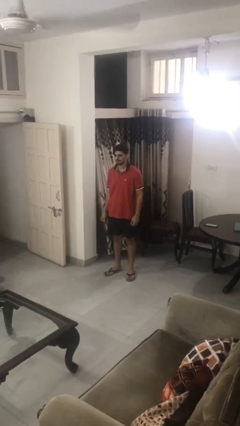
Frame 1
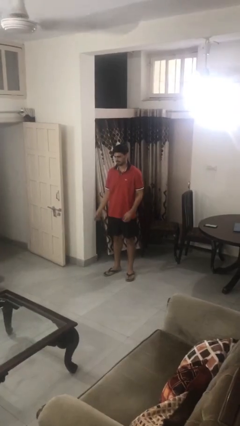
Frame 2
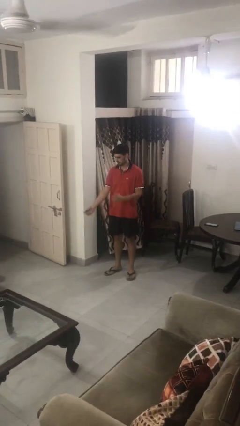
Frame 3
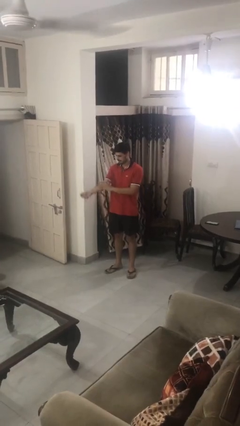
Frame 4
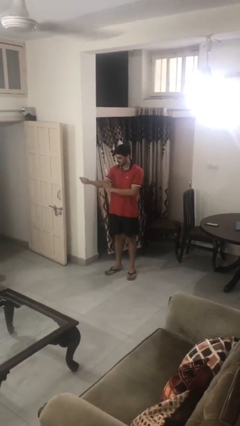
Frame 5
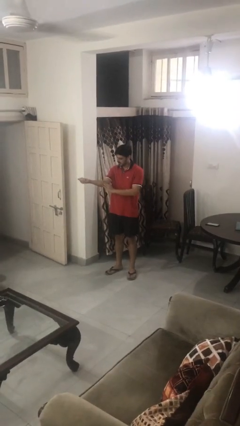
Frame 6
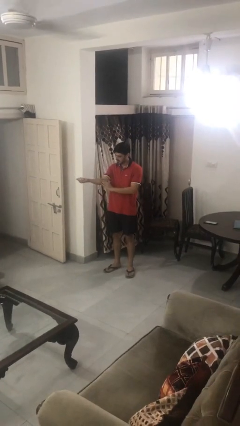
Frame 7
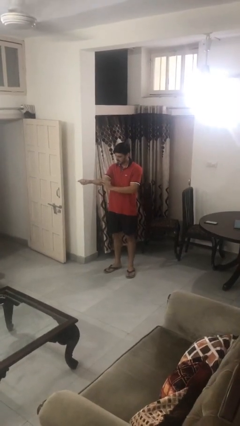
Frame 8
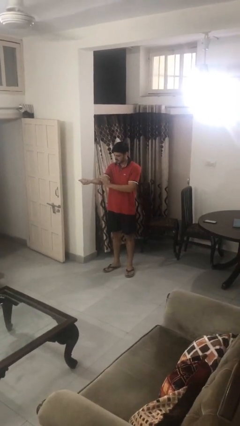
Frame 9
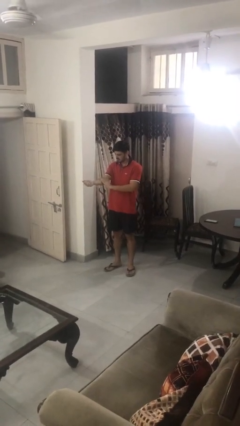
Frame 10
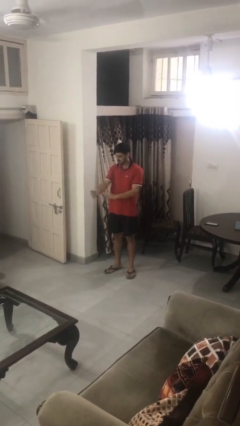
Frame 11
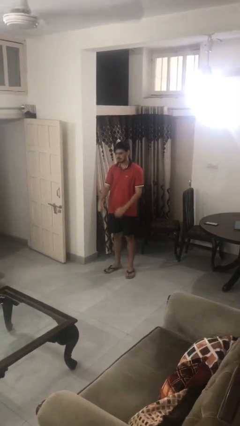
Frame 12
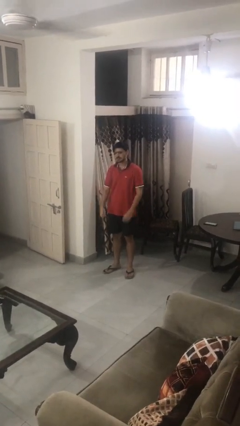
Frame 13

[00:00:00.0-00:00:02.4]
person swats bug

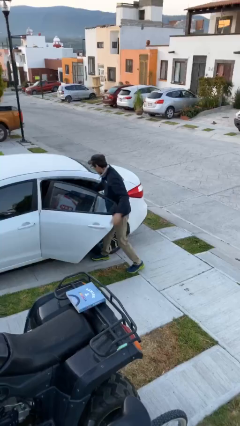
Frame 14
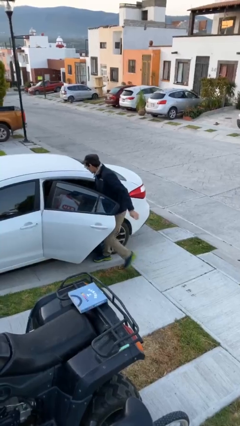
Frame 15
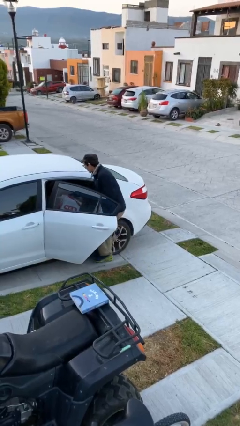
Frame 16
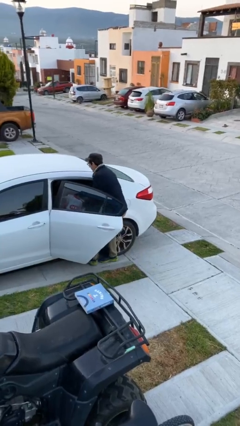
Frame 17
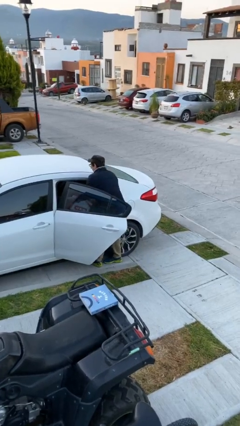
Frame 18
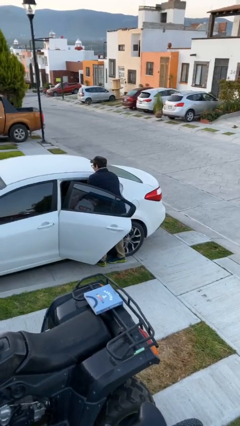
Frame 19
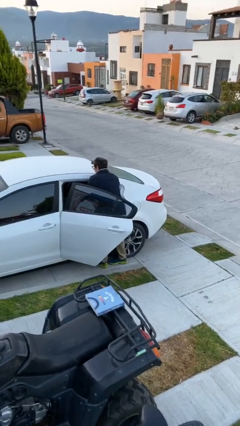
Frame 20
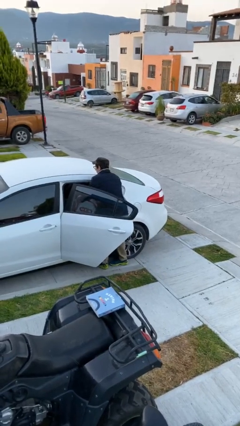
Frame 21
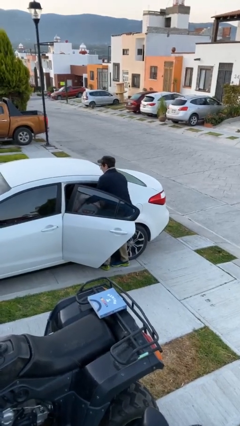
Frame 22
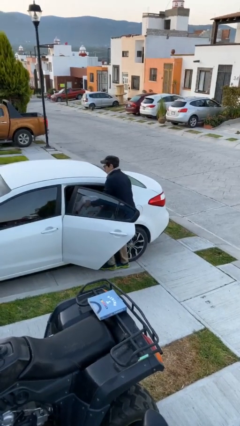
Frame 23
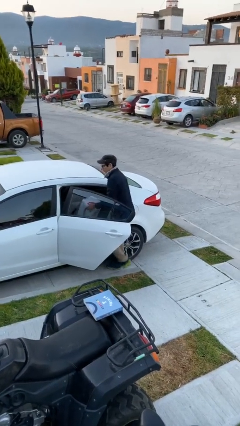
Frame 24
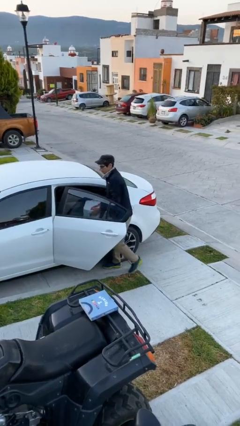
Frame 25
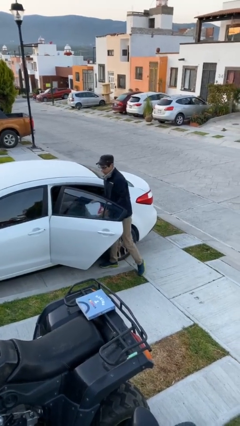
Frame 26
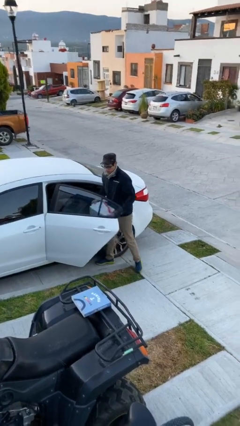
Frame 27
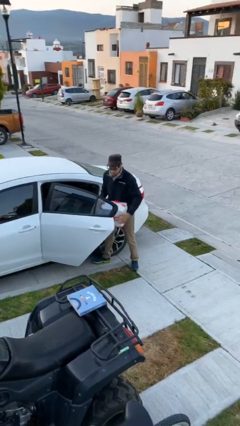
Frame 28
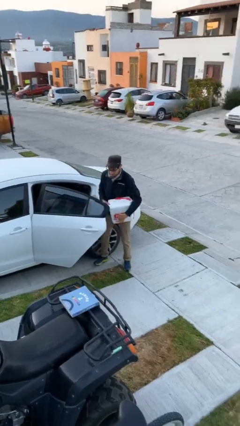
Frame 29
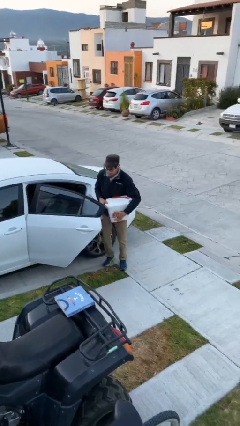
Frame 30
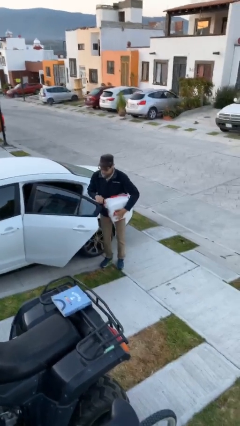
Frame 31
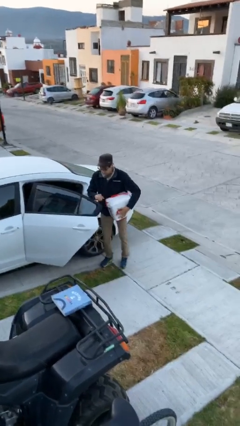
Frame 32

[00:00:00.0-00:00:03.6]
person unloads car

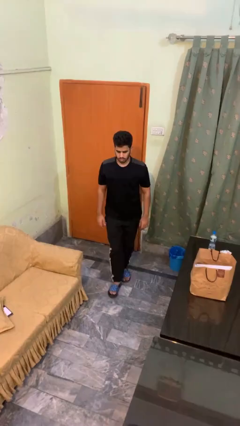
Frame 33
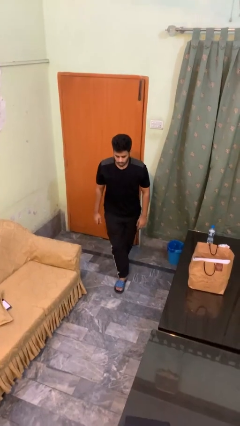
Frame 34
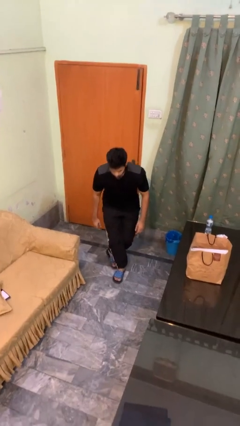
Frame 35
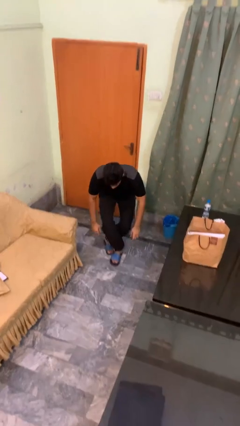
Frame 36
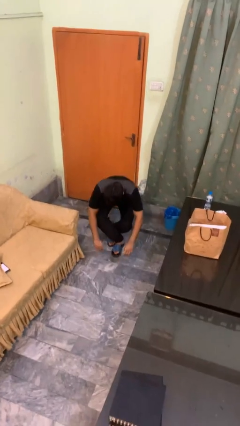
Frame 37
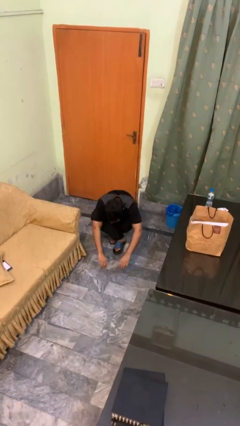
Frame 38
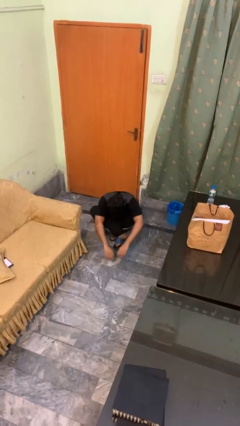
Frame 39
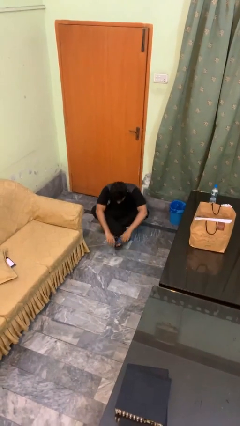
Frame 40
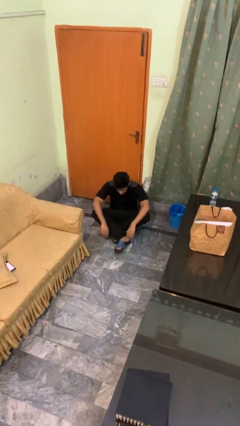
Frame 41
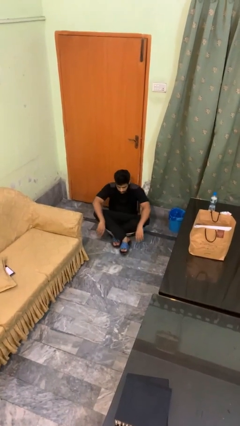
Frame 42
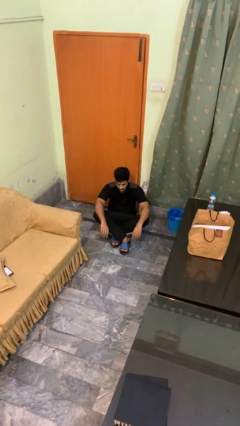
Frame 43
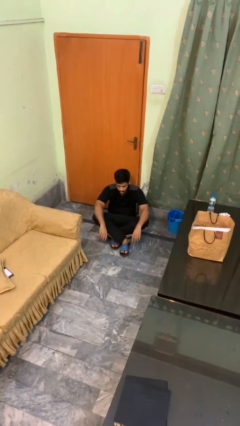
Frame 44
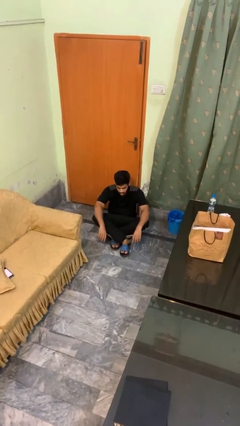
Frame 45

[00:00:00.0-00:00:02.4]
person sits crisscross

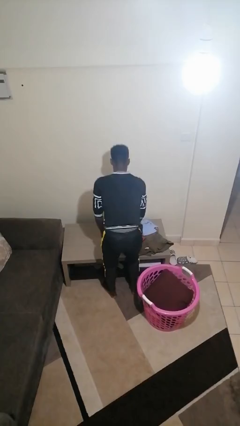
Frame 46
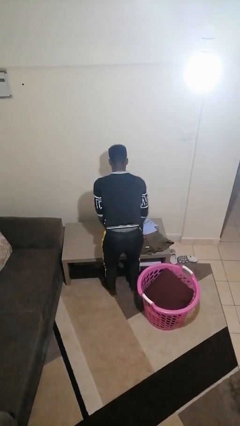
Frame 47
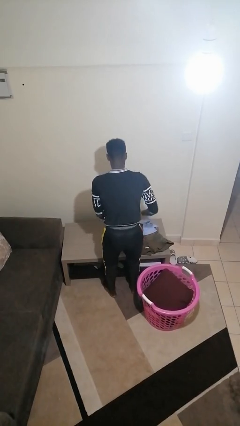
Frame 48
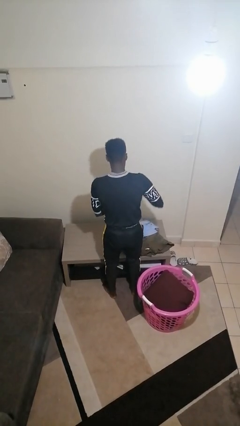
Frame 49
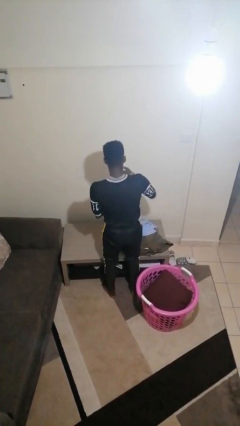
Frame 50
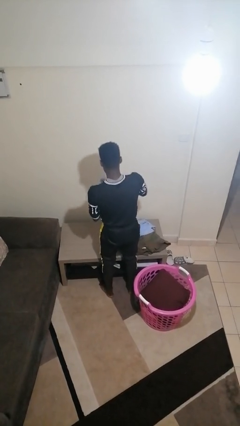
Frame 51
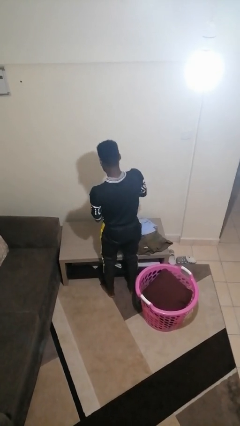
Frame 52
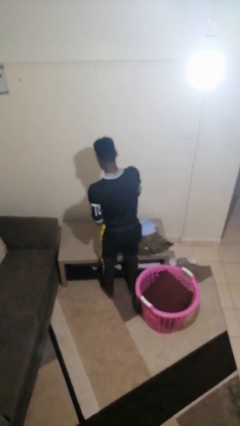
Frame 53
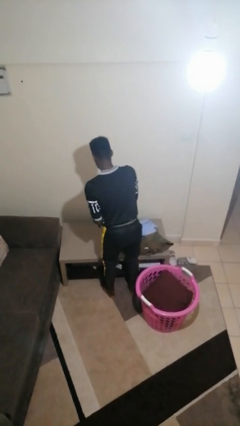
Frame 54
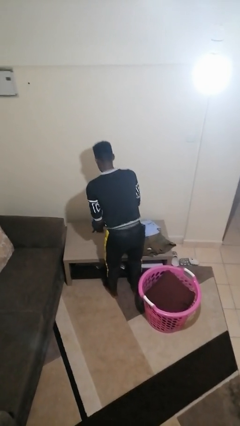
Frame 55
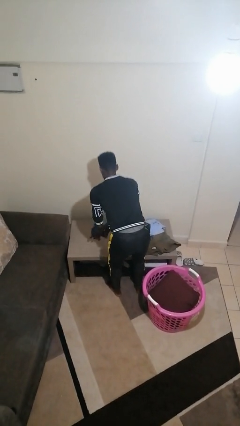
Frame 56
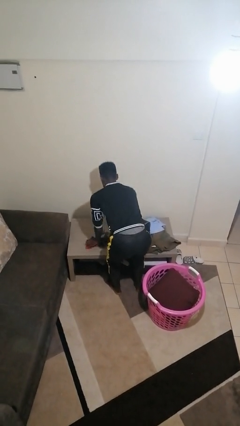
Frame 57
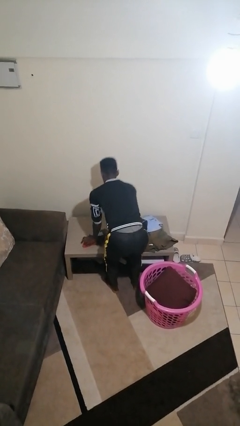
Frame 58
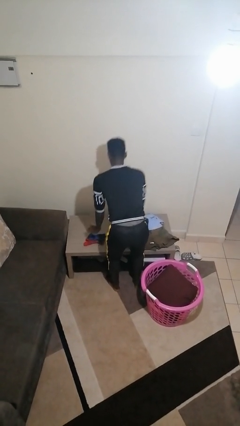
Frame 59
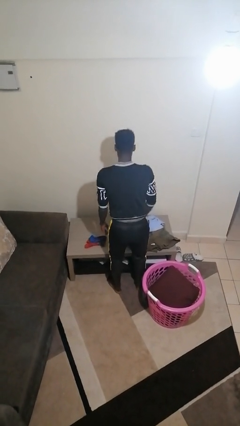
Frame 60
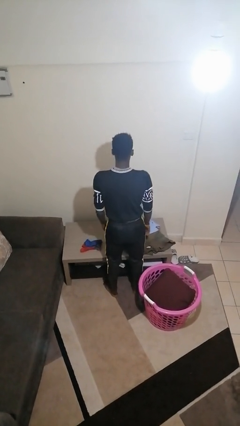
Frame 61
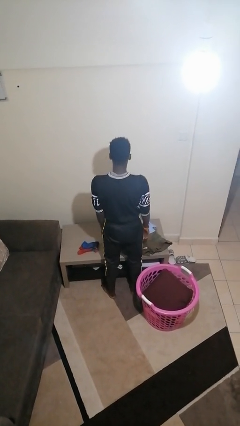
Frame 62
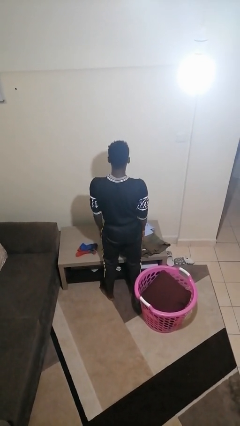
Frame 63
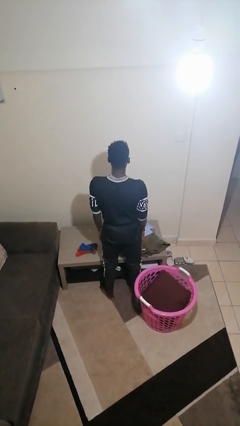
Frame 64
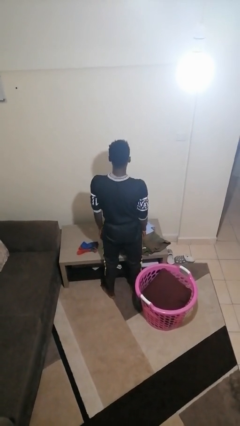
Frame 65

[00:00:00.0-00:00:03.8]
person folds socks

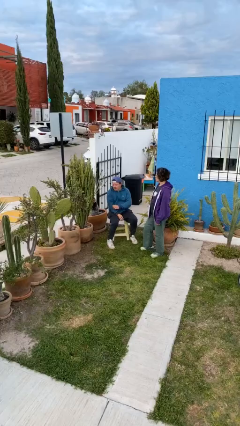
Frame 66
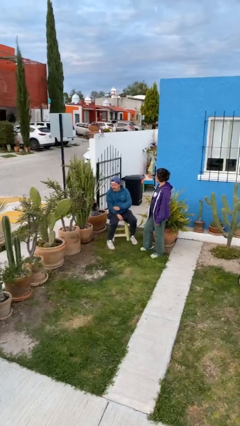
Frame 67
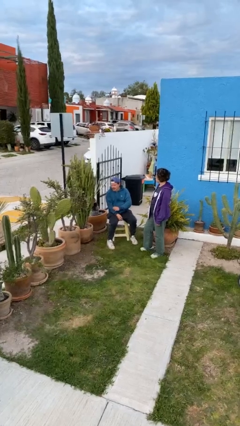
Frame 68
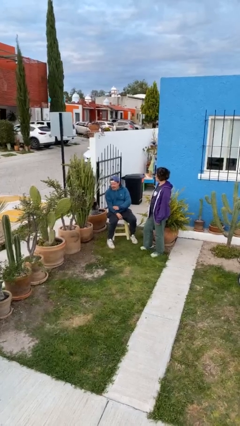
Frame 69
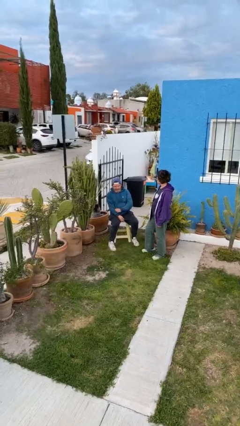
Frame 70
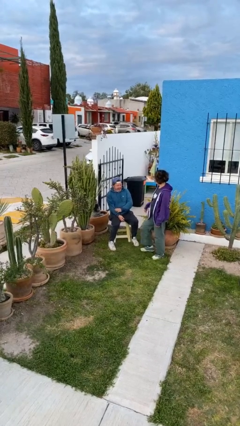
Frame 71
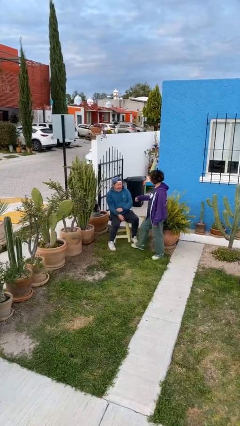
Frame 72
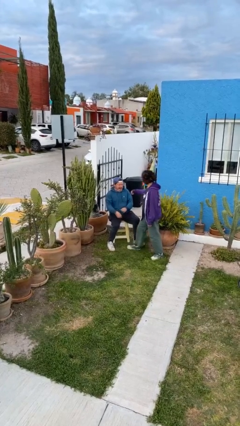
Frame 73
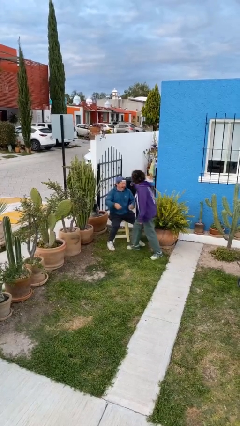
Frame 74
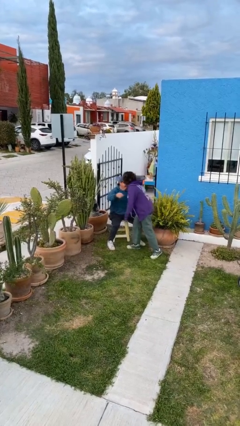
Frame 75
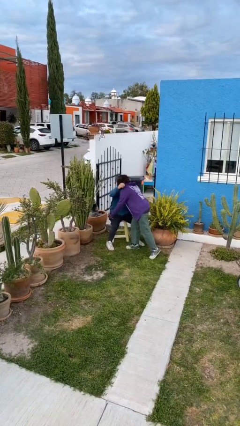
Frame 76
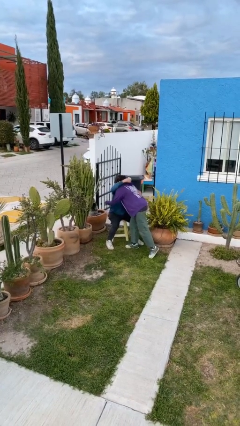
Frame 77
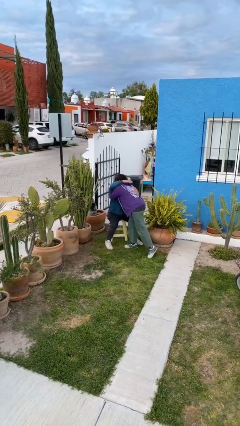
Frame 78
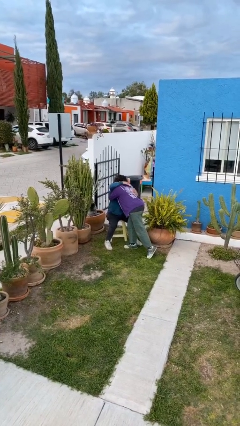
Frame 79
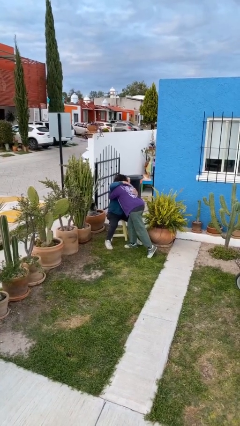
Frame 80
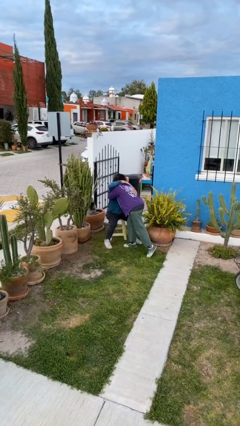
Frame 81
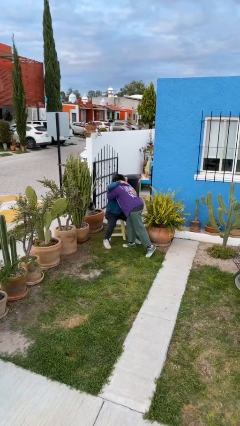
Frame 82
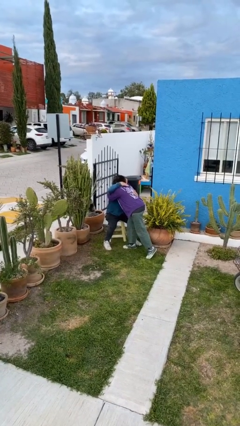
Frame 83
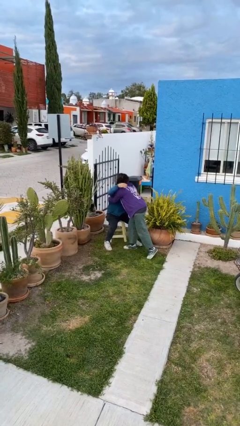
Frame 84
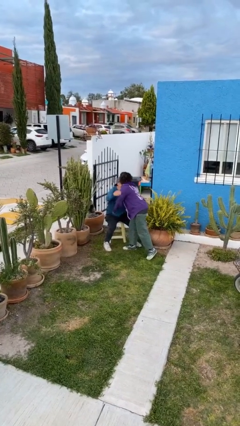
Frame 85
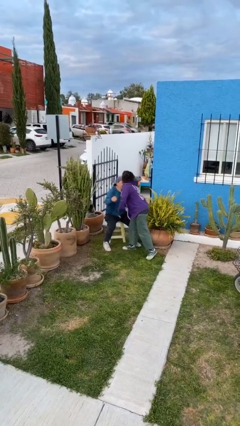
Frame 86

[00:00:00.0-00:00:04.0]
person embraces person

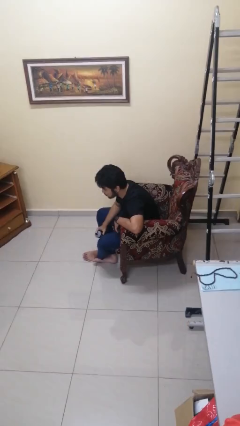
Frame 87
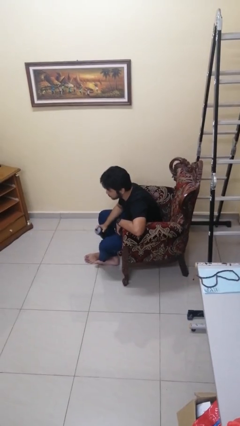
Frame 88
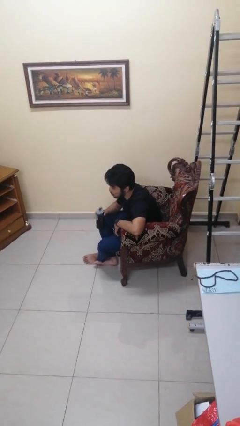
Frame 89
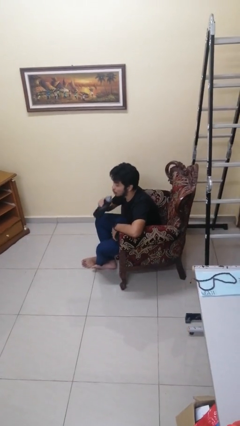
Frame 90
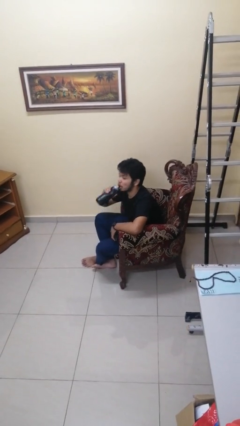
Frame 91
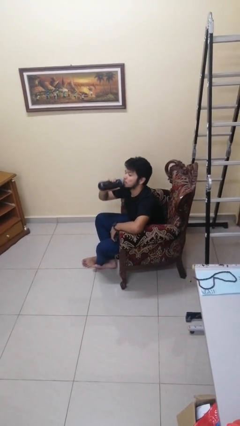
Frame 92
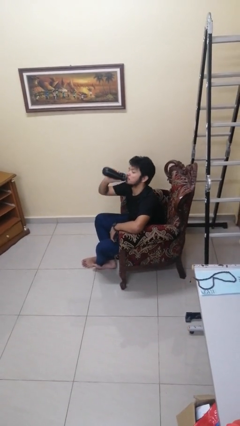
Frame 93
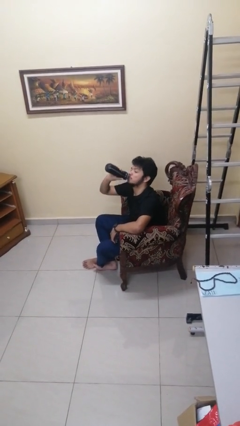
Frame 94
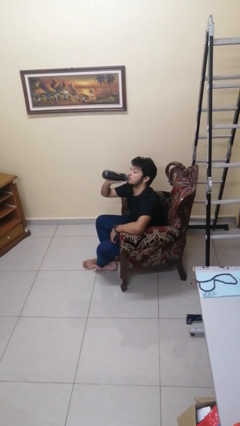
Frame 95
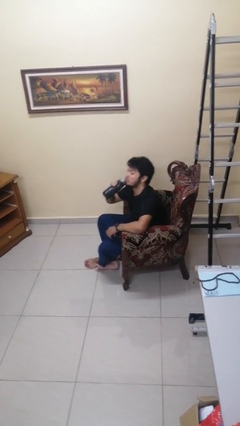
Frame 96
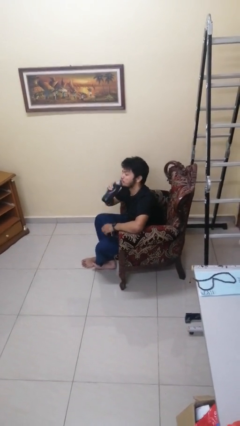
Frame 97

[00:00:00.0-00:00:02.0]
person drinks from bottle
